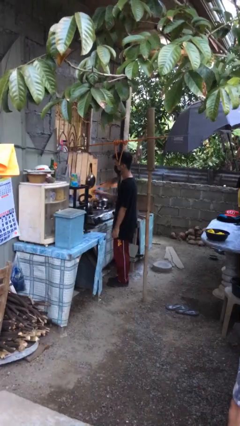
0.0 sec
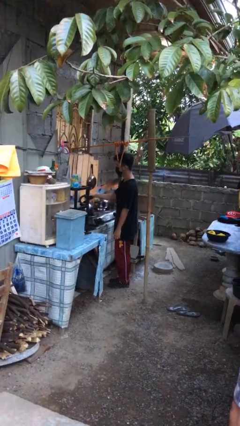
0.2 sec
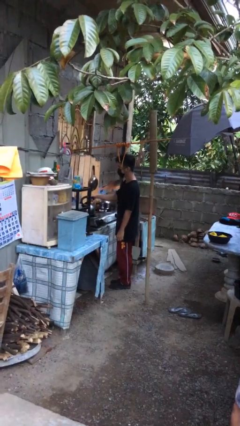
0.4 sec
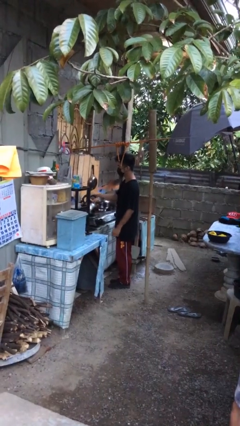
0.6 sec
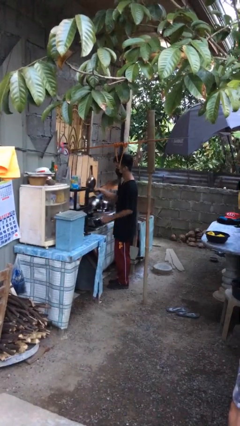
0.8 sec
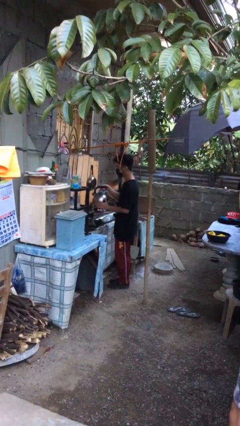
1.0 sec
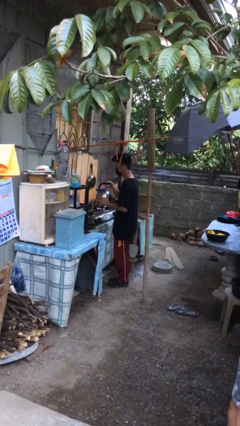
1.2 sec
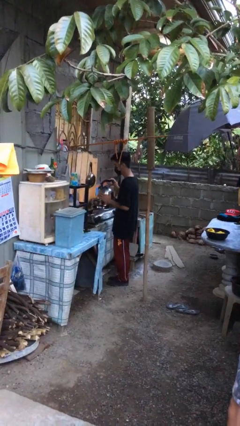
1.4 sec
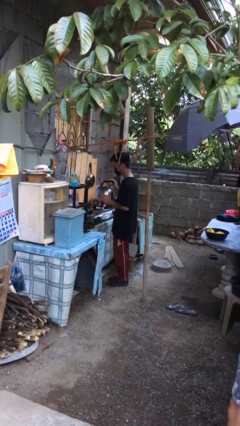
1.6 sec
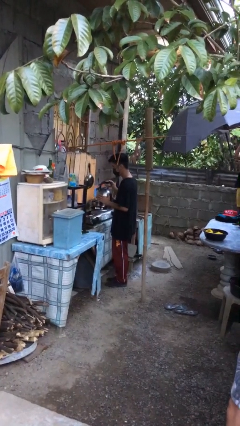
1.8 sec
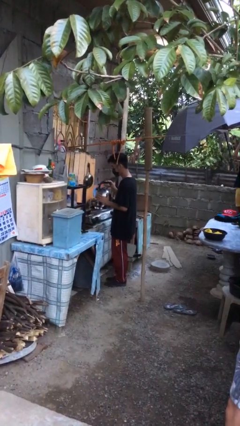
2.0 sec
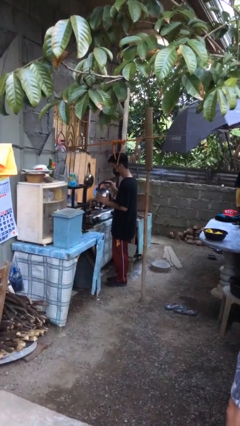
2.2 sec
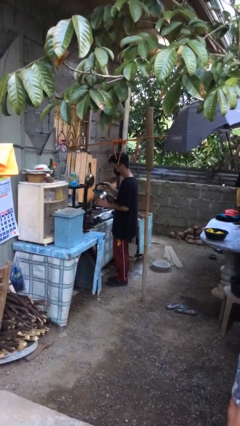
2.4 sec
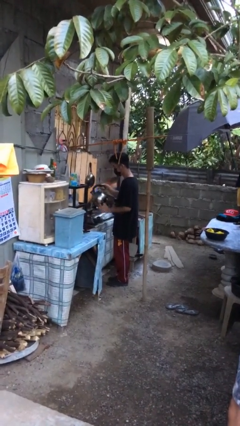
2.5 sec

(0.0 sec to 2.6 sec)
person picks up object from countertop

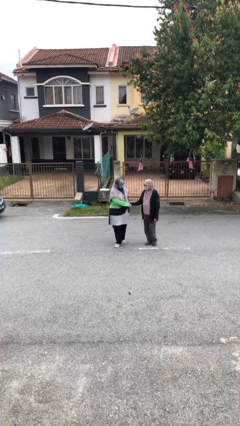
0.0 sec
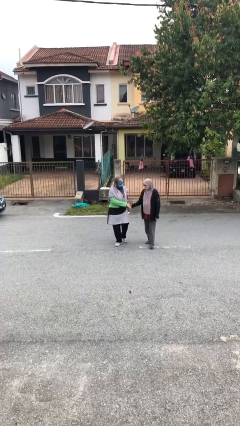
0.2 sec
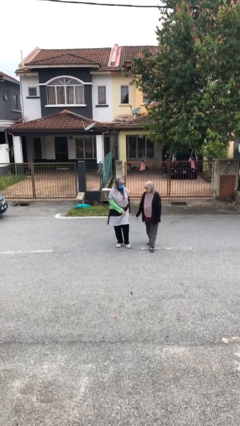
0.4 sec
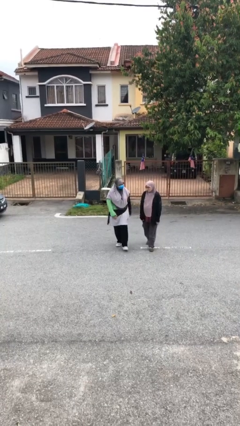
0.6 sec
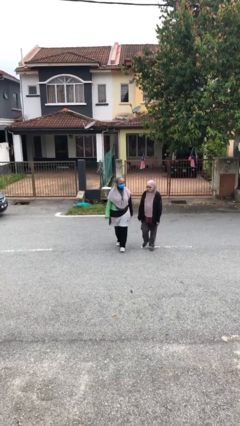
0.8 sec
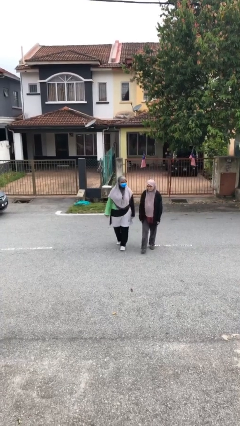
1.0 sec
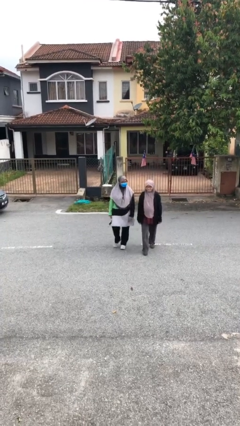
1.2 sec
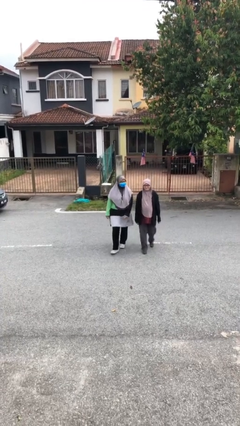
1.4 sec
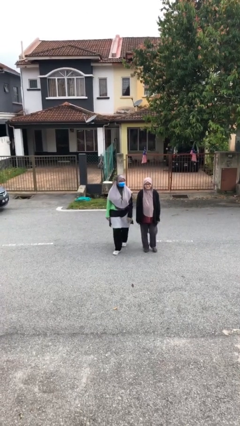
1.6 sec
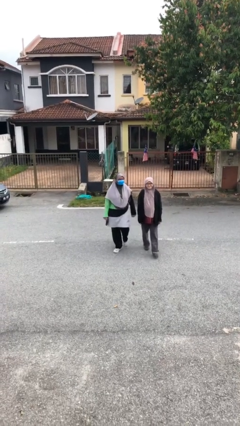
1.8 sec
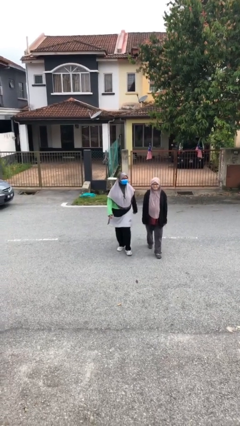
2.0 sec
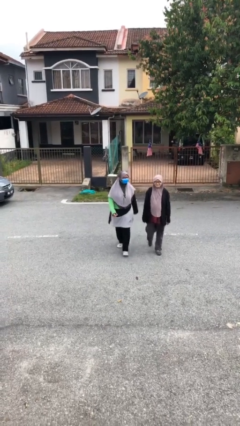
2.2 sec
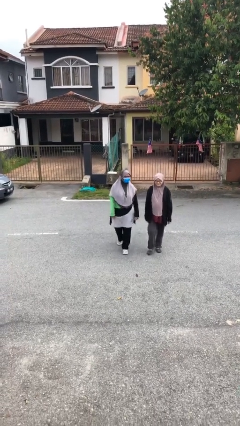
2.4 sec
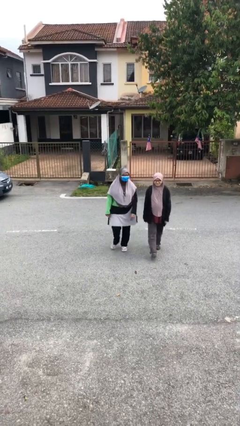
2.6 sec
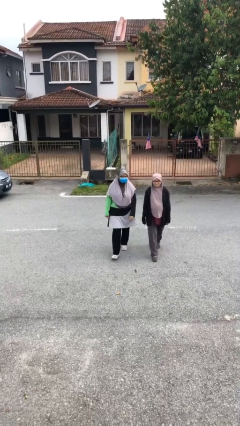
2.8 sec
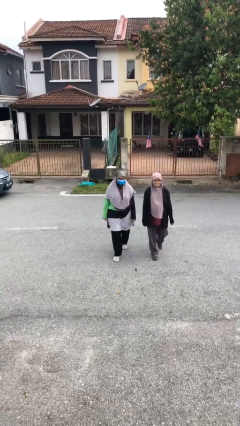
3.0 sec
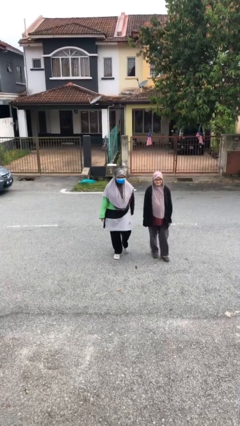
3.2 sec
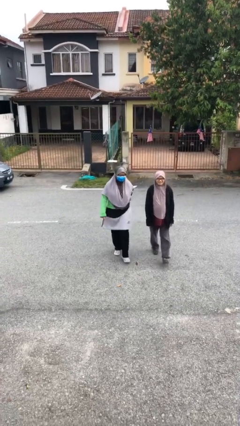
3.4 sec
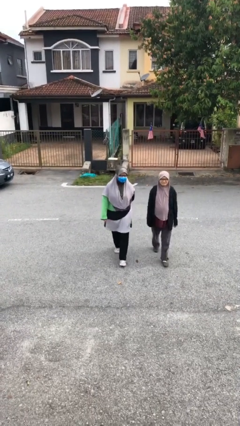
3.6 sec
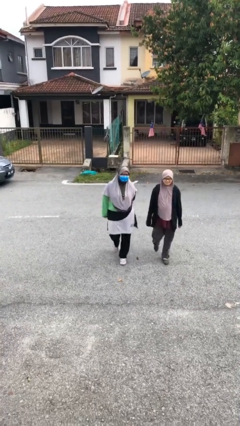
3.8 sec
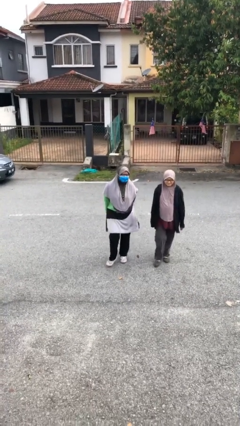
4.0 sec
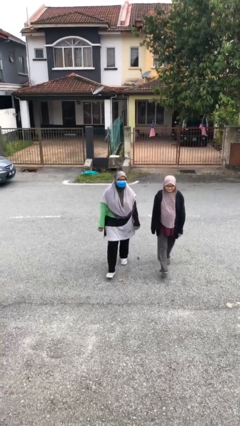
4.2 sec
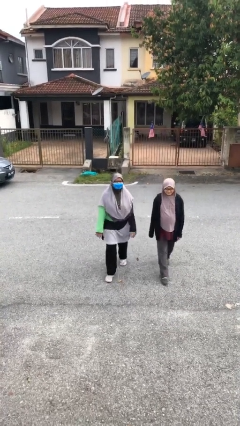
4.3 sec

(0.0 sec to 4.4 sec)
person talks to person

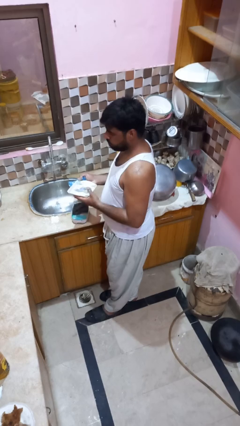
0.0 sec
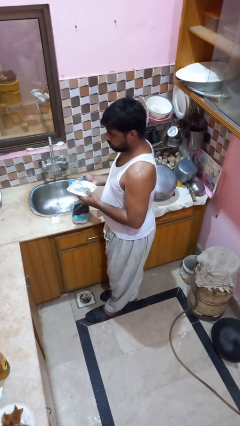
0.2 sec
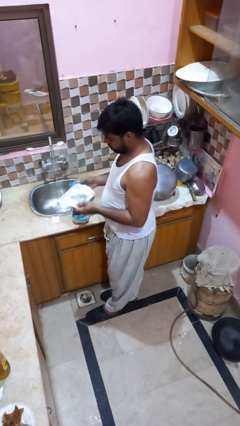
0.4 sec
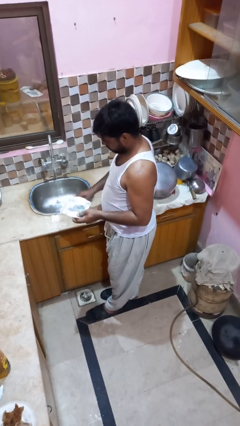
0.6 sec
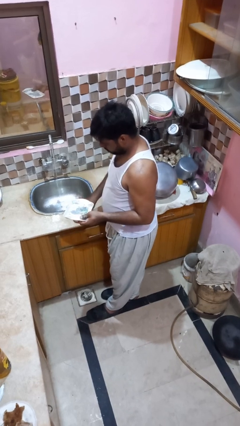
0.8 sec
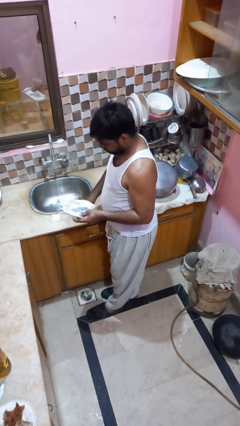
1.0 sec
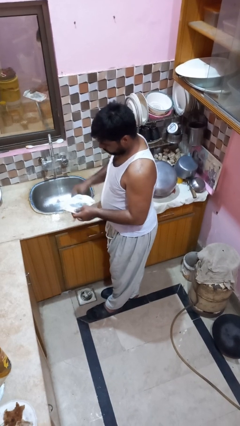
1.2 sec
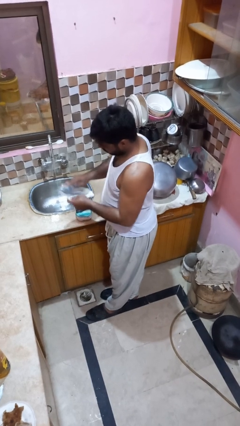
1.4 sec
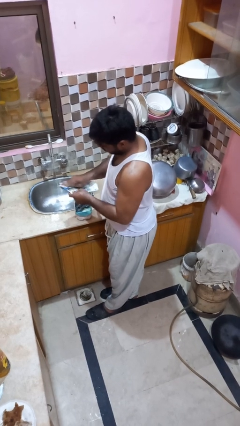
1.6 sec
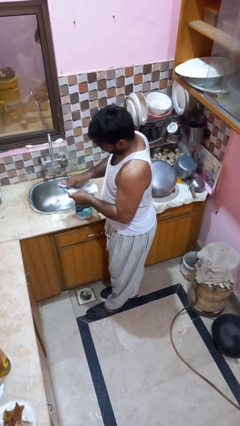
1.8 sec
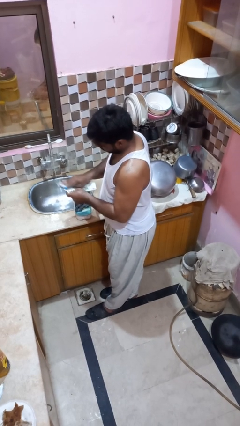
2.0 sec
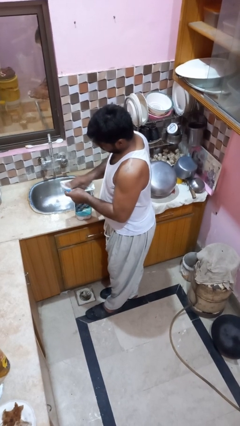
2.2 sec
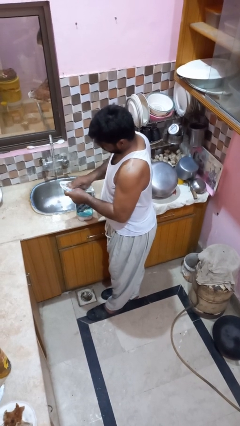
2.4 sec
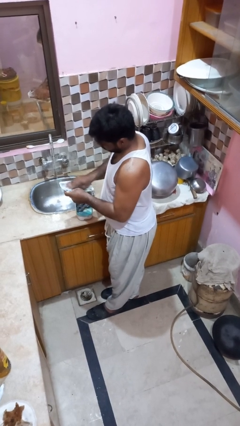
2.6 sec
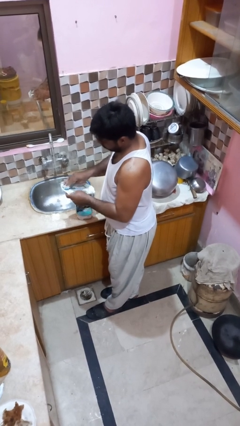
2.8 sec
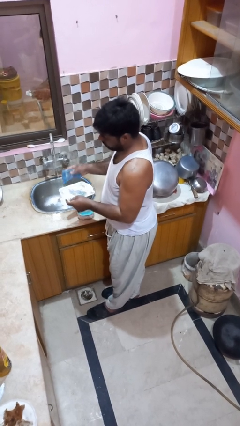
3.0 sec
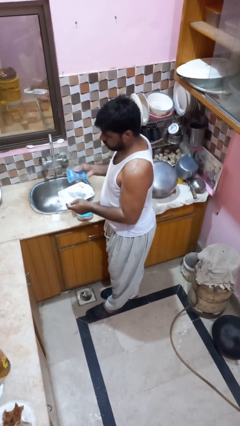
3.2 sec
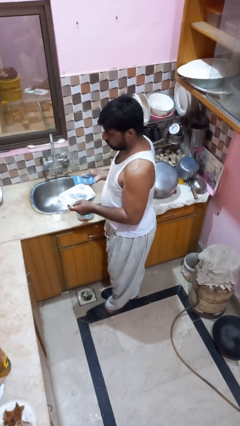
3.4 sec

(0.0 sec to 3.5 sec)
person washes dish

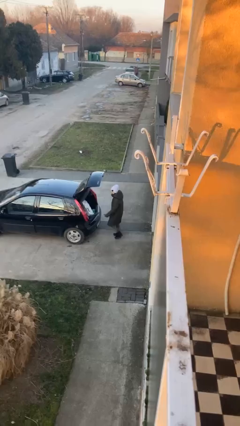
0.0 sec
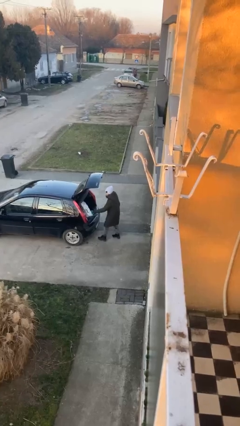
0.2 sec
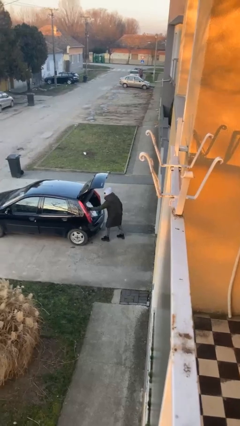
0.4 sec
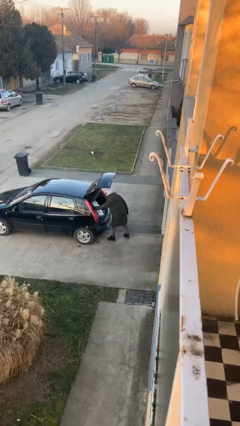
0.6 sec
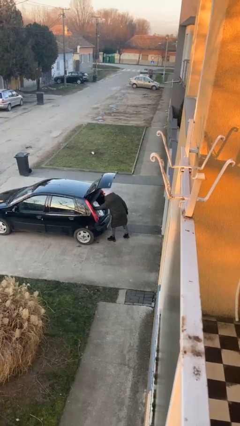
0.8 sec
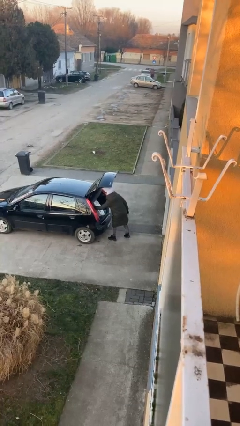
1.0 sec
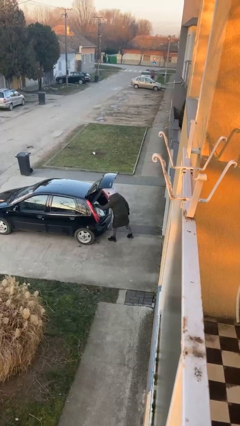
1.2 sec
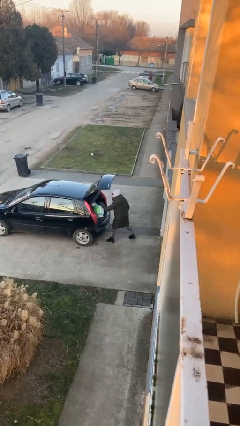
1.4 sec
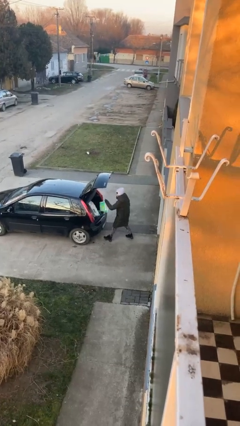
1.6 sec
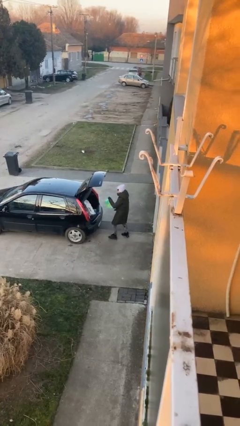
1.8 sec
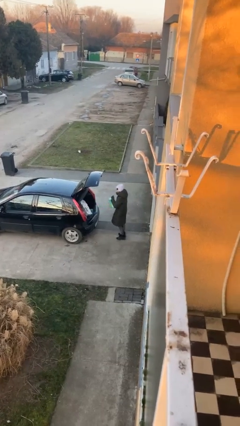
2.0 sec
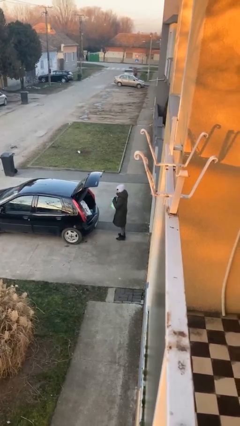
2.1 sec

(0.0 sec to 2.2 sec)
person unloads car

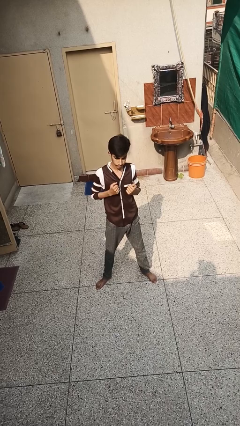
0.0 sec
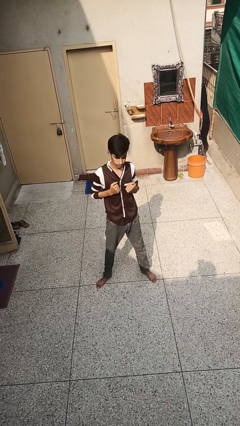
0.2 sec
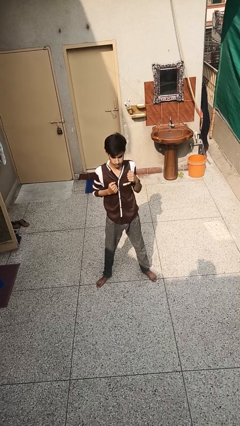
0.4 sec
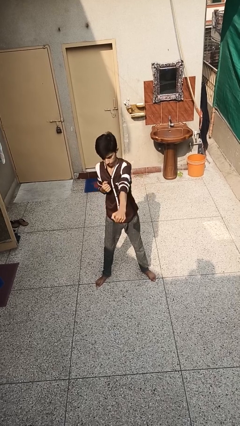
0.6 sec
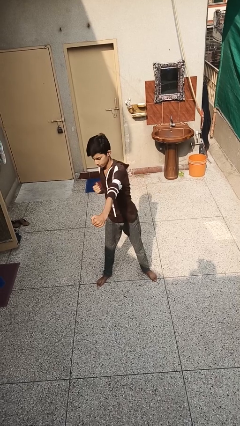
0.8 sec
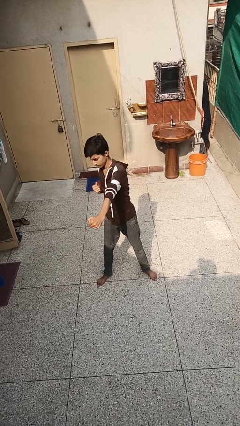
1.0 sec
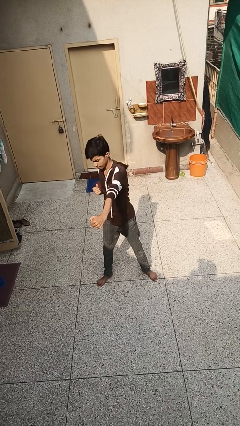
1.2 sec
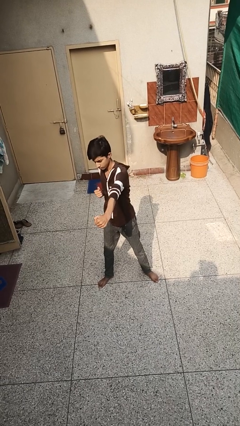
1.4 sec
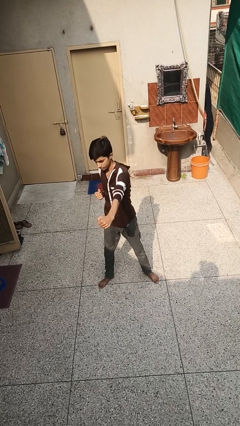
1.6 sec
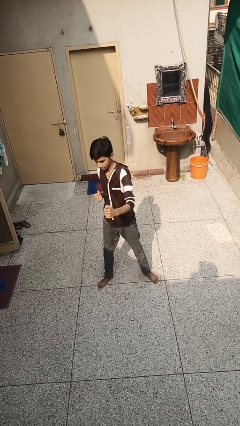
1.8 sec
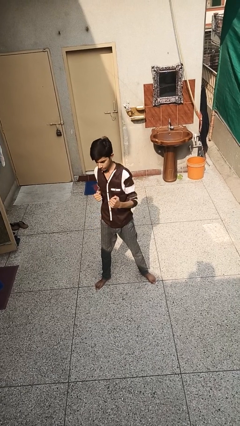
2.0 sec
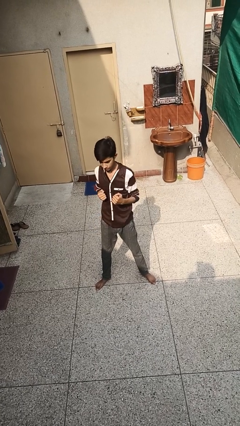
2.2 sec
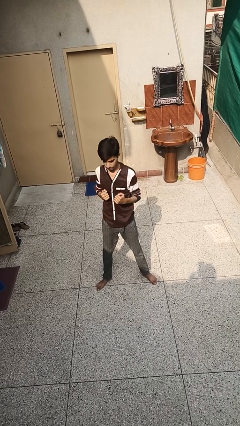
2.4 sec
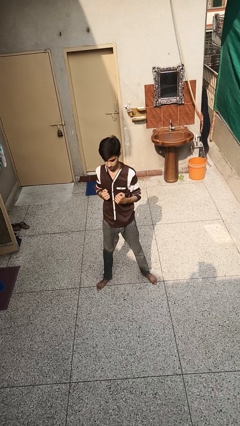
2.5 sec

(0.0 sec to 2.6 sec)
person punches

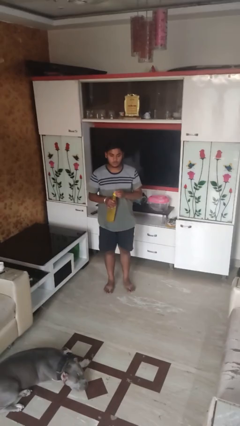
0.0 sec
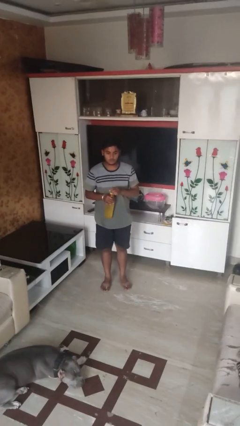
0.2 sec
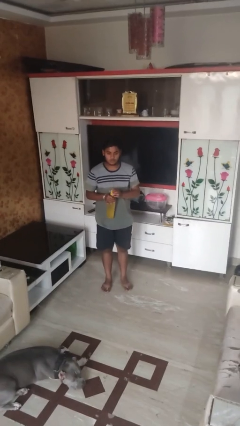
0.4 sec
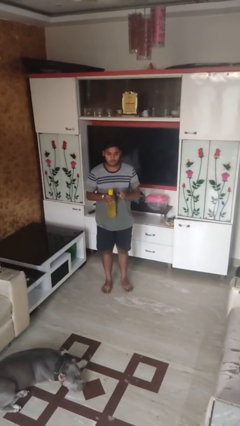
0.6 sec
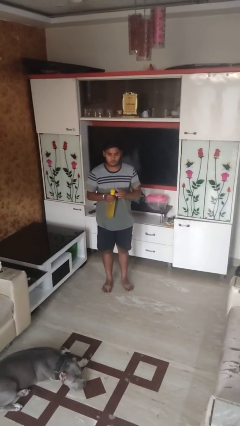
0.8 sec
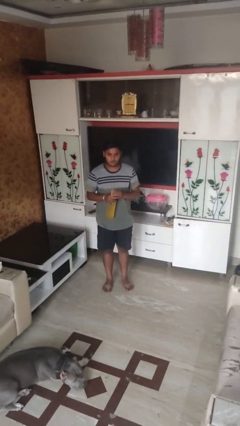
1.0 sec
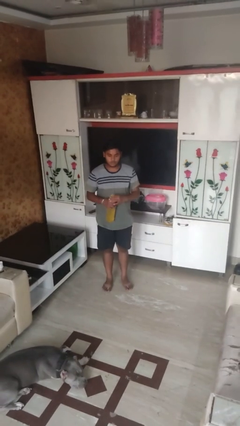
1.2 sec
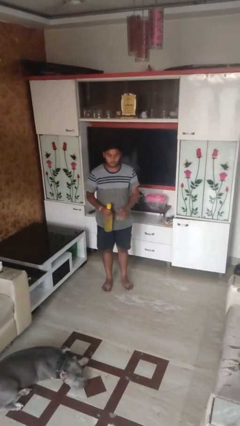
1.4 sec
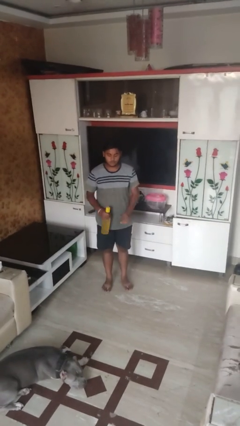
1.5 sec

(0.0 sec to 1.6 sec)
person screws lid to bottle

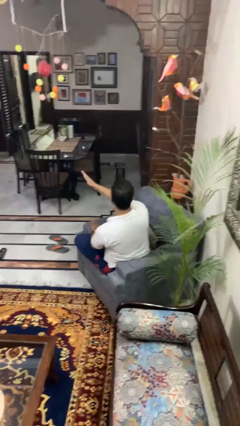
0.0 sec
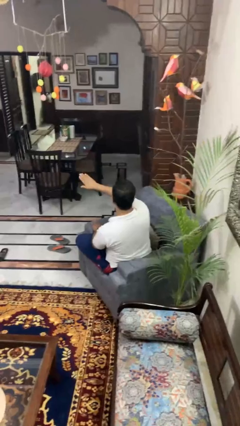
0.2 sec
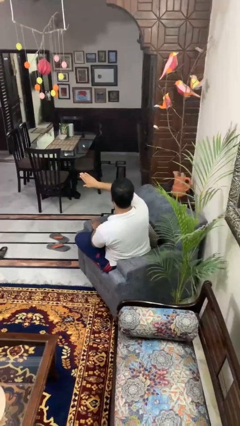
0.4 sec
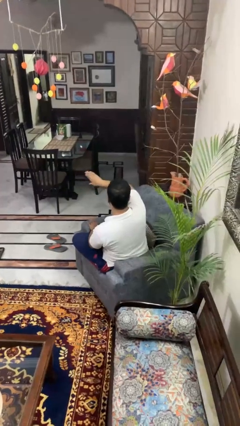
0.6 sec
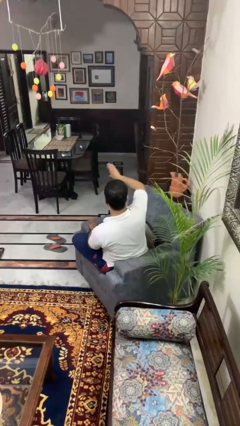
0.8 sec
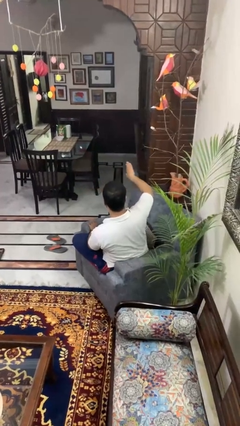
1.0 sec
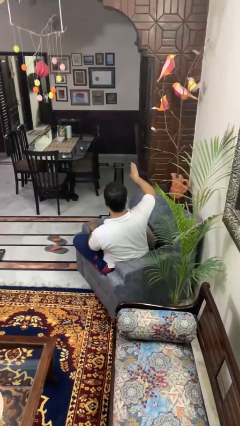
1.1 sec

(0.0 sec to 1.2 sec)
person gestures swipe right
